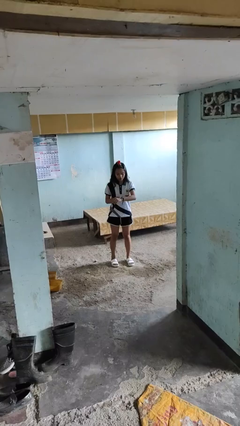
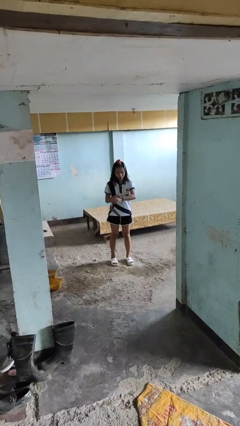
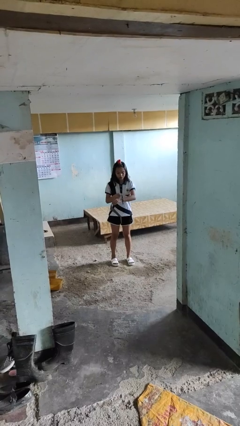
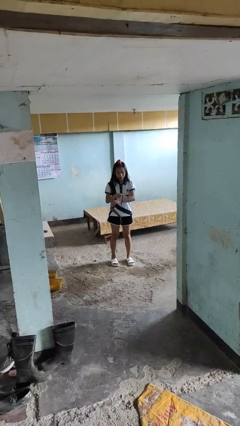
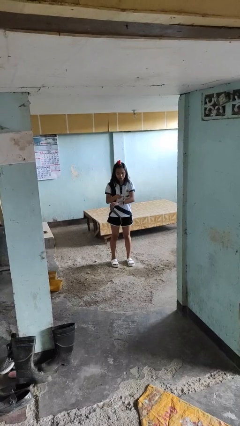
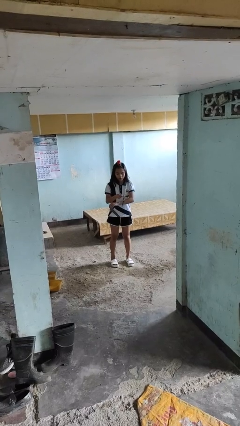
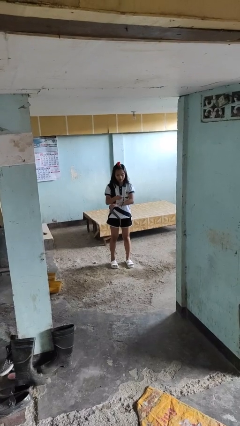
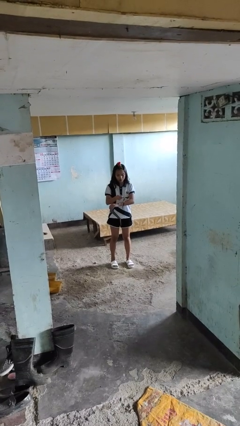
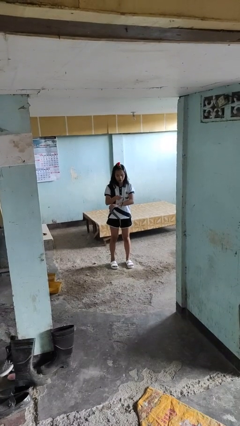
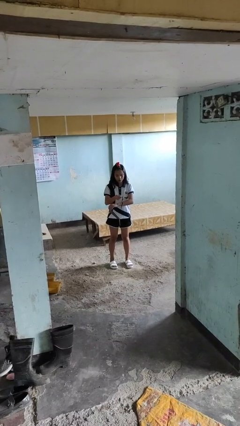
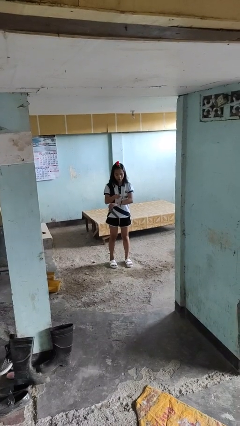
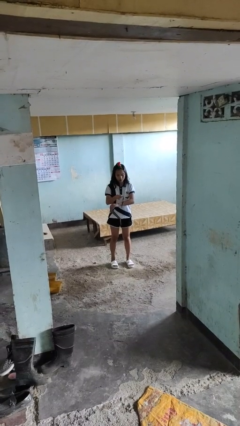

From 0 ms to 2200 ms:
person takes off wristwatch

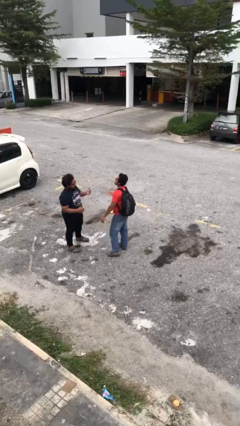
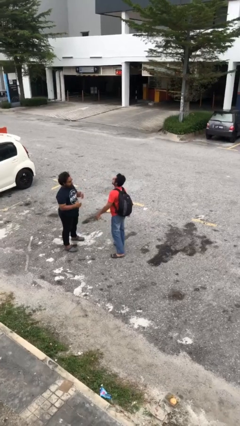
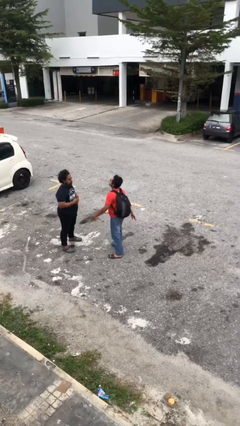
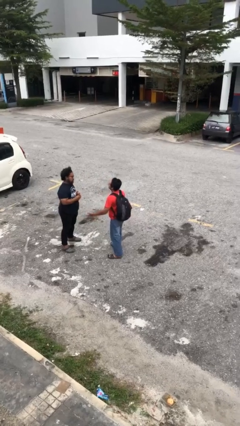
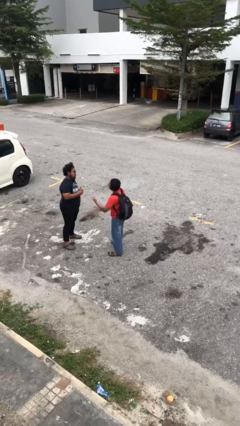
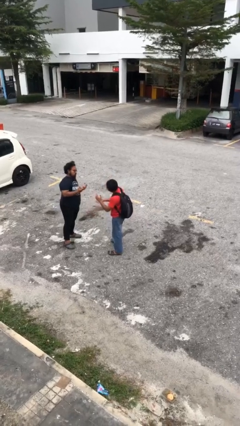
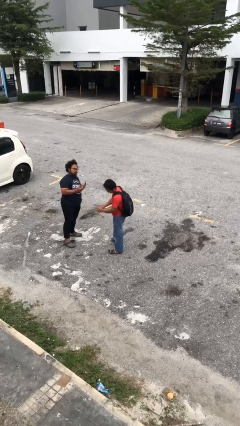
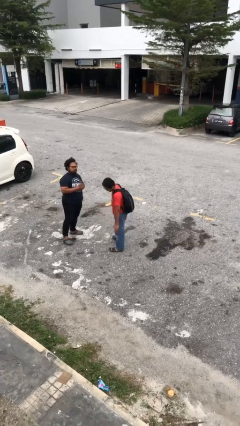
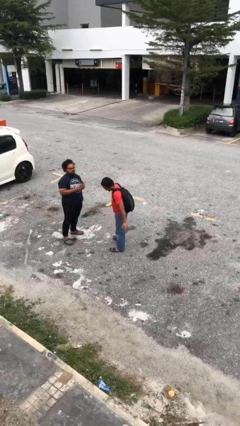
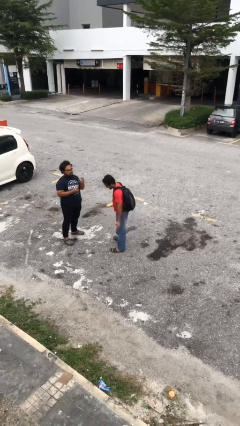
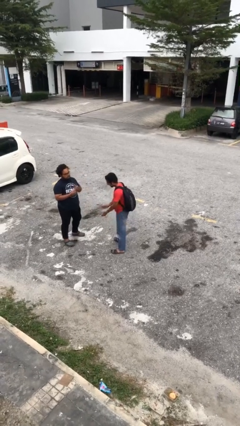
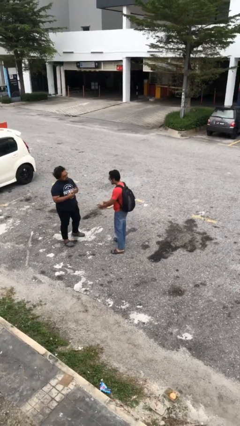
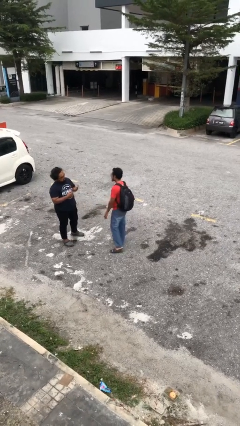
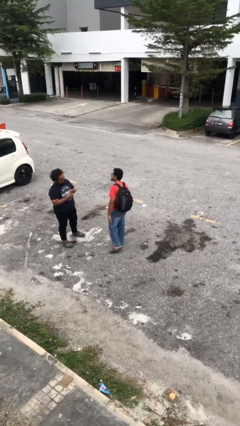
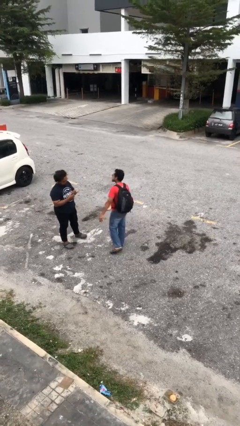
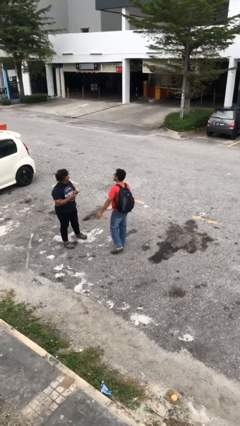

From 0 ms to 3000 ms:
person talks to person

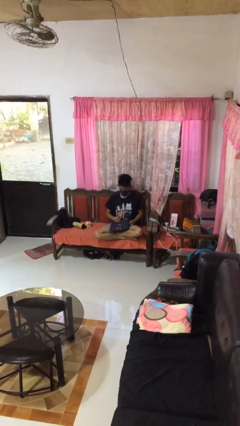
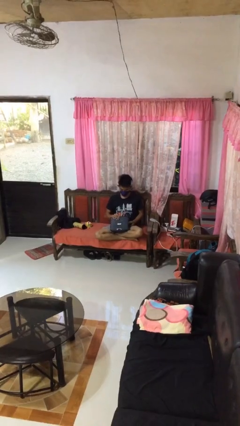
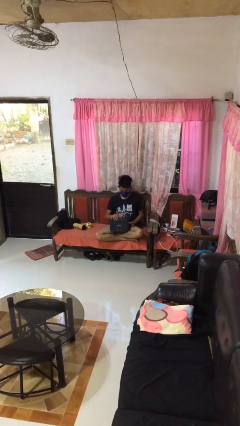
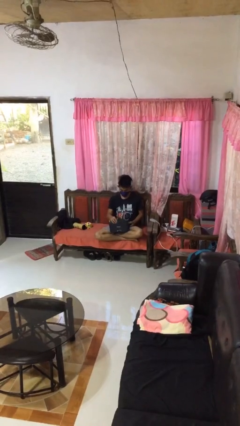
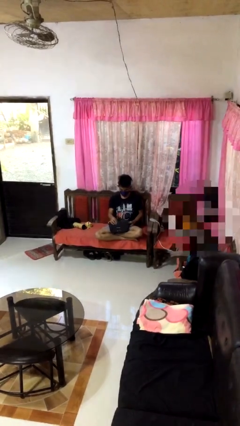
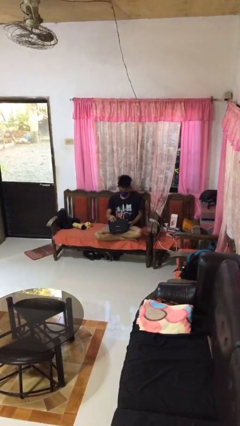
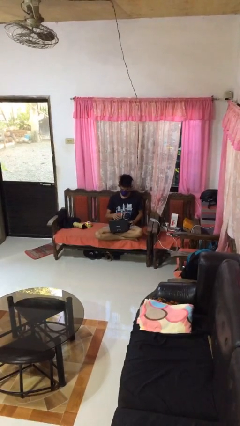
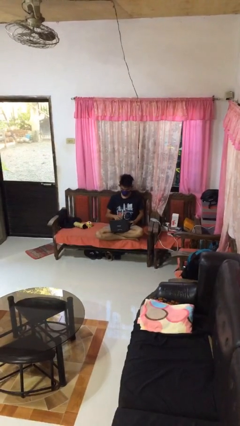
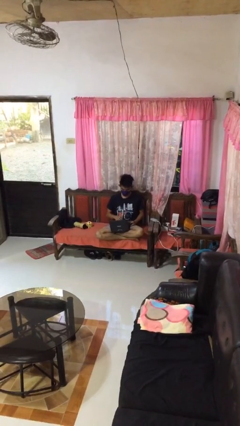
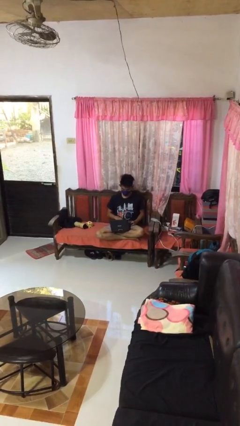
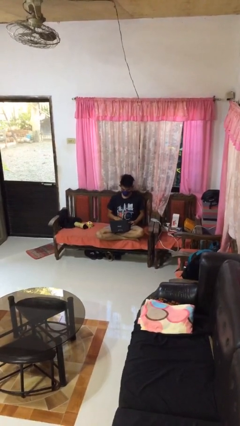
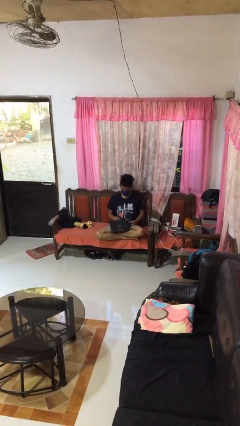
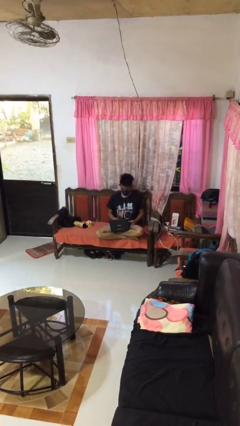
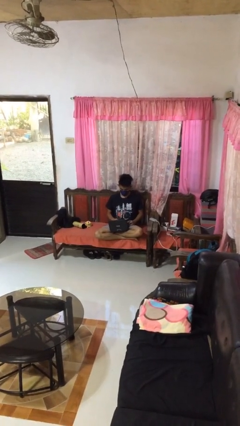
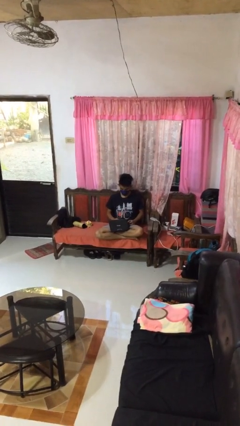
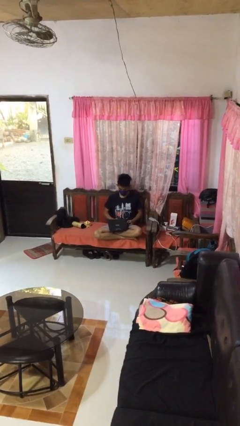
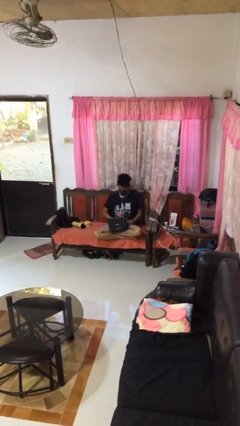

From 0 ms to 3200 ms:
person opens laptop

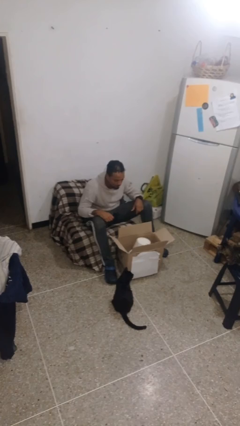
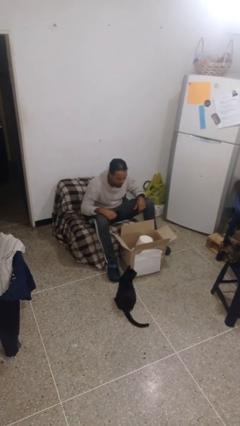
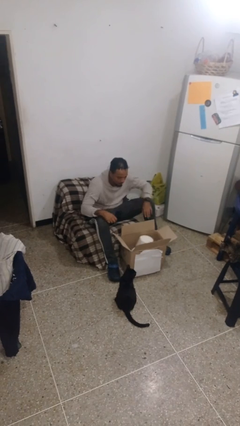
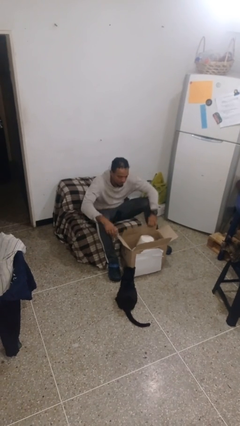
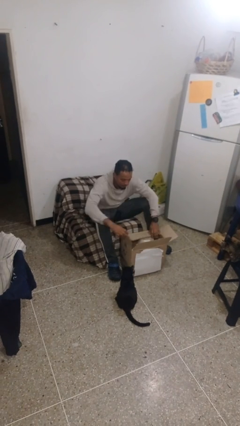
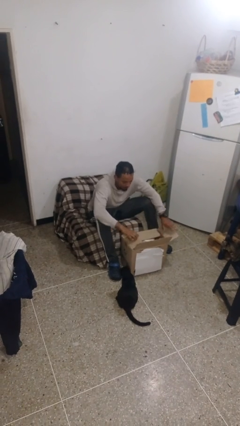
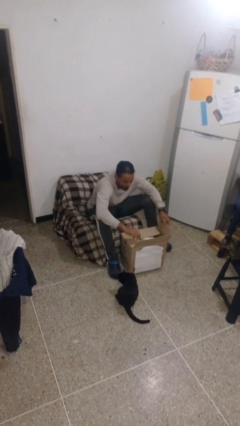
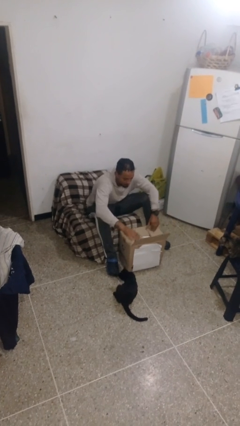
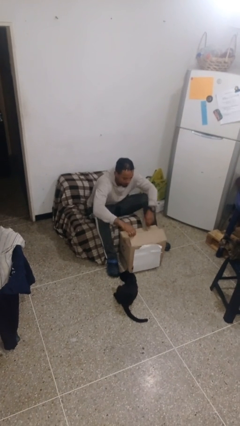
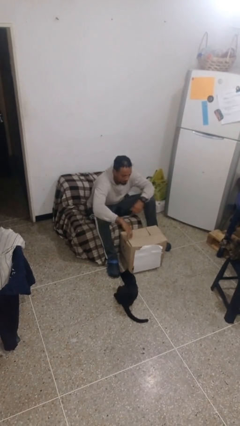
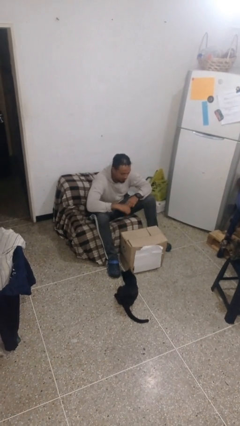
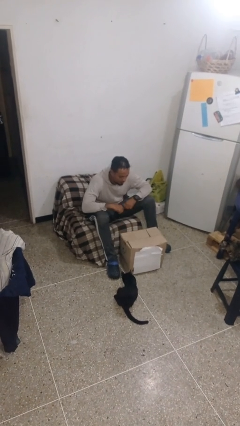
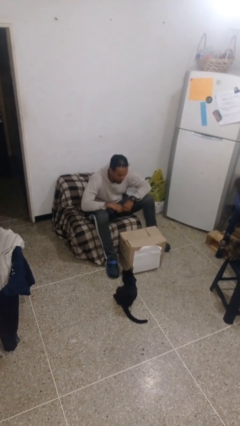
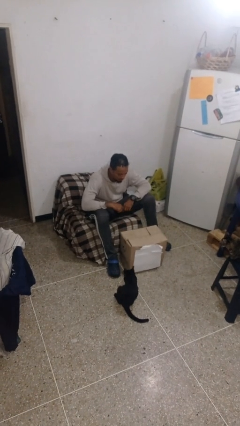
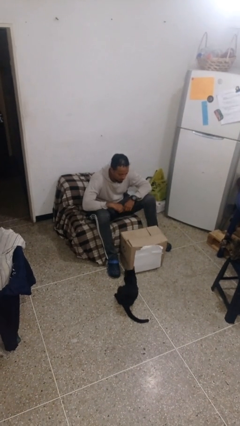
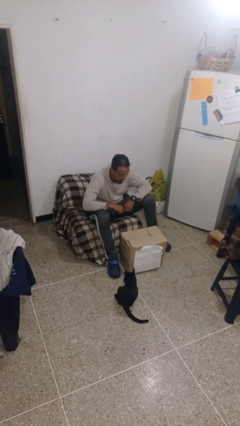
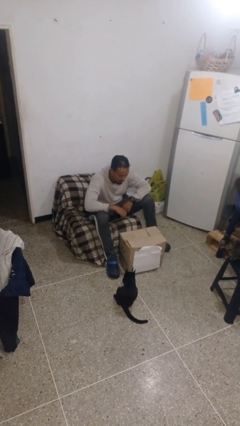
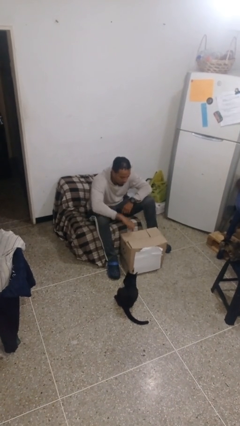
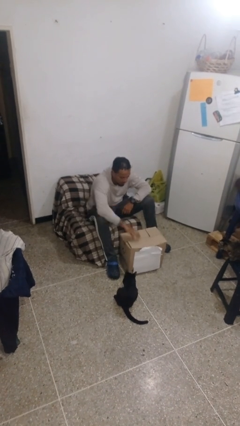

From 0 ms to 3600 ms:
person closes box

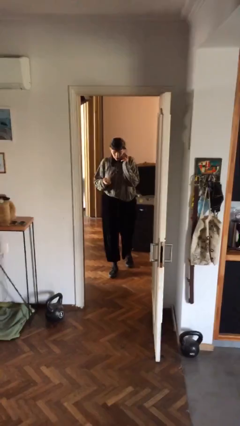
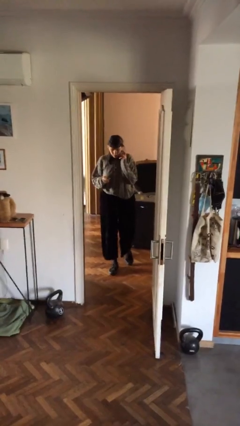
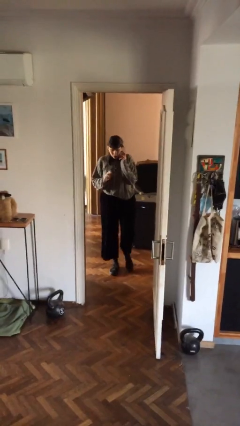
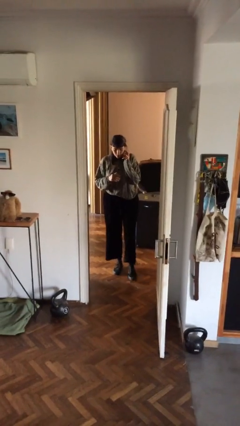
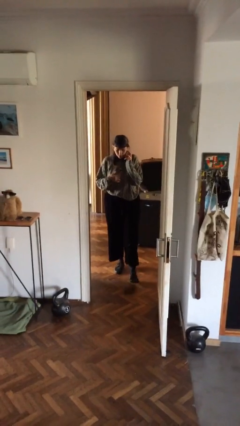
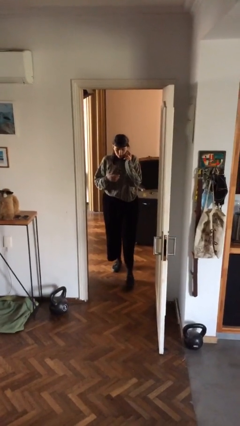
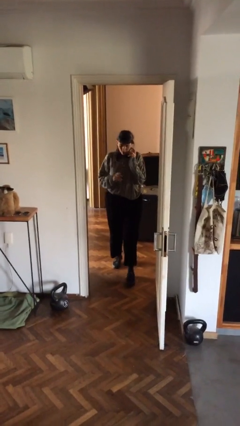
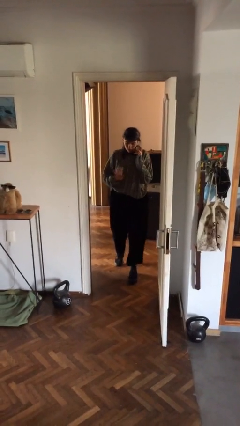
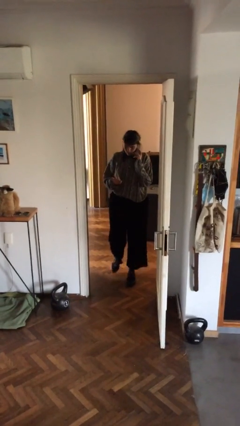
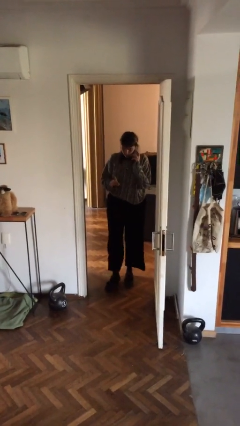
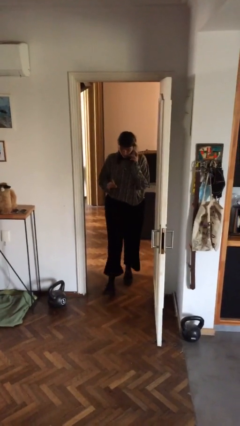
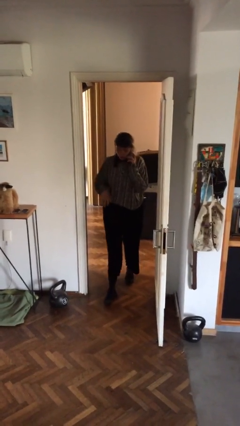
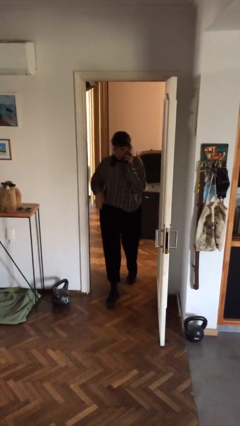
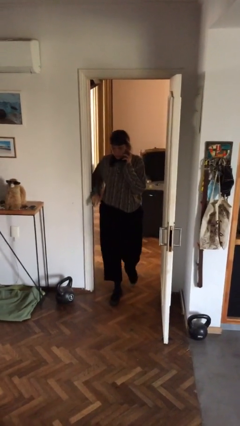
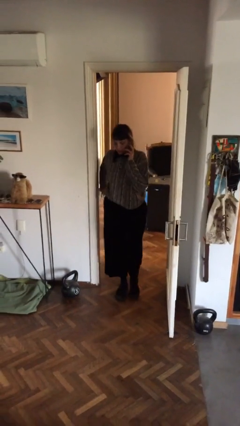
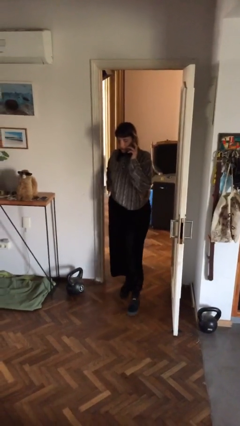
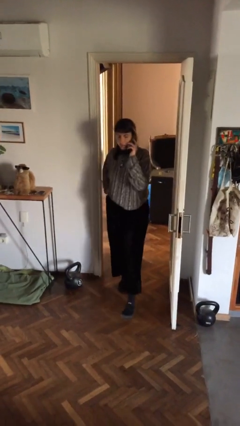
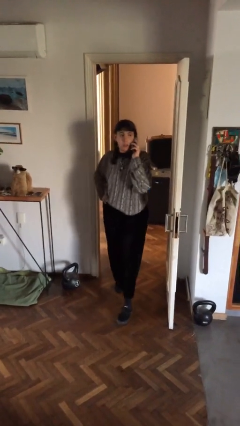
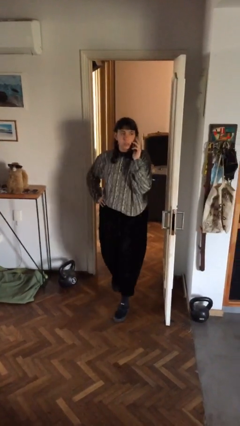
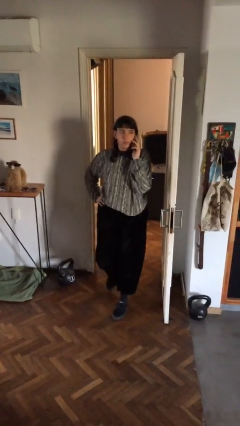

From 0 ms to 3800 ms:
person enters scene through structure

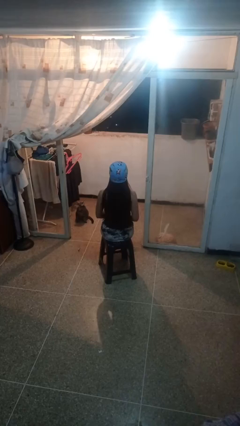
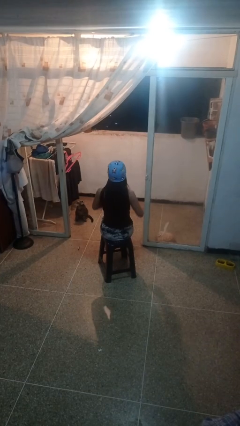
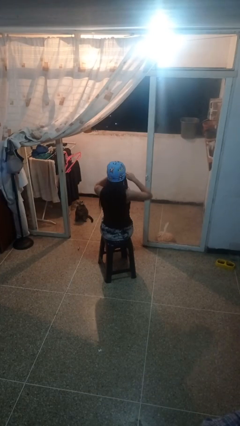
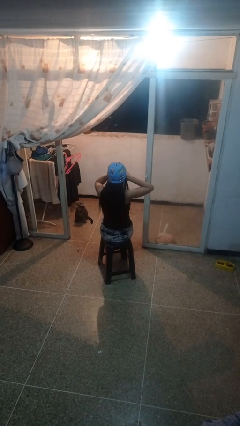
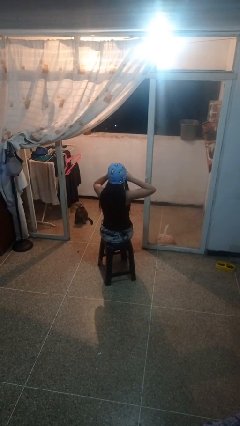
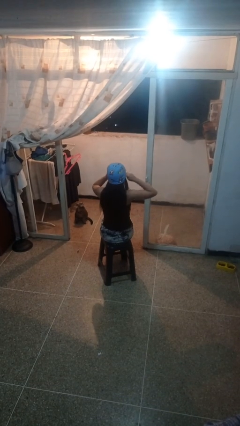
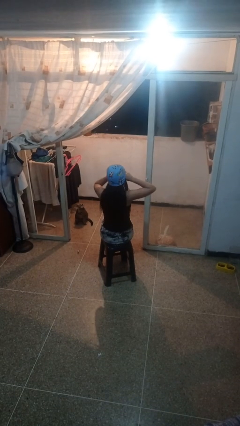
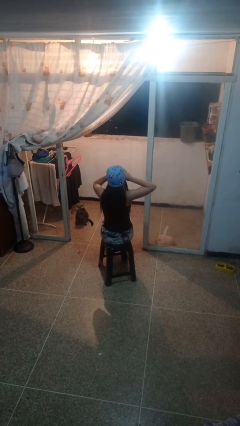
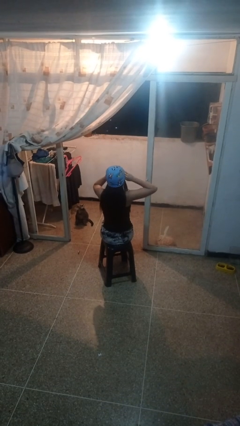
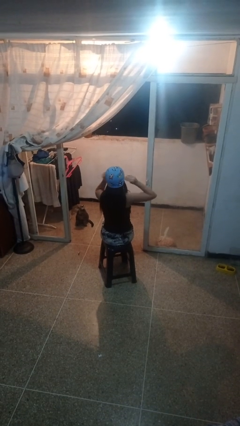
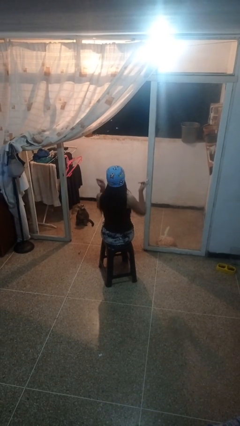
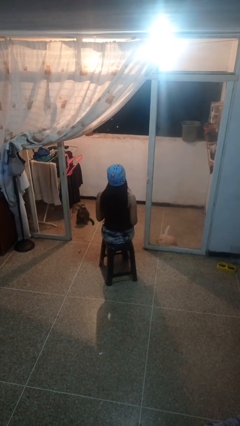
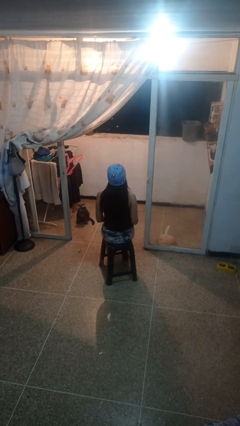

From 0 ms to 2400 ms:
person rubs eyes
